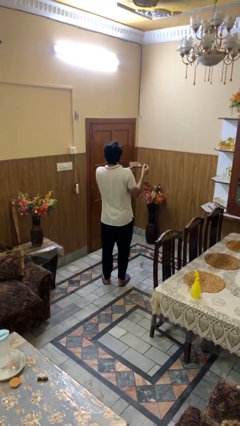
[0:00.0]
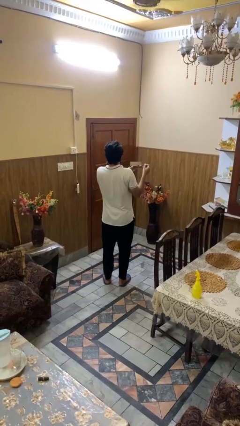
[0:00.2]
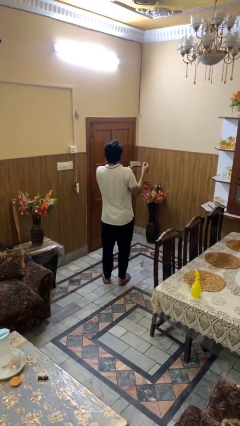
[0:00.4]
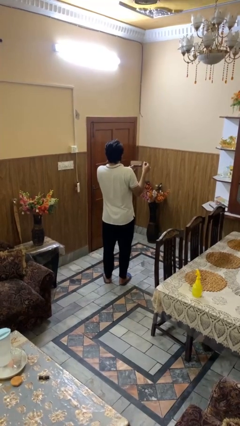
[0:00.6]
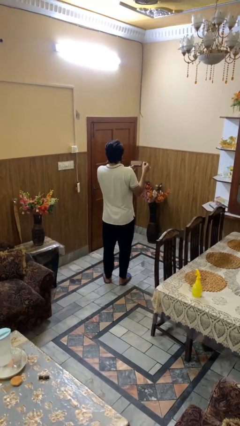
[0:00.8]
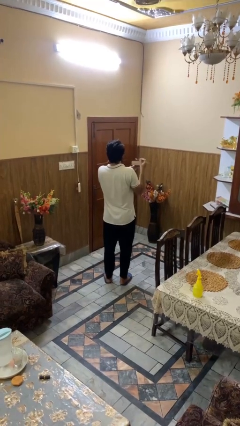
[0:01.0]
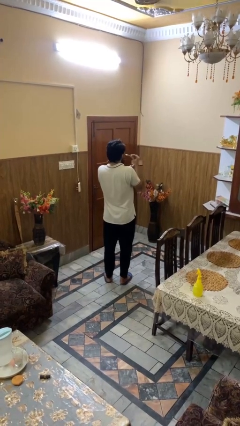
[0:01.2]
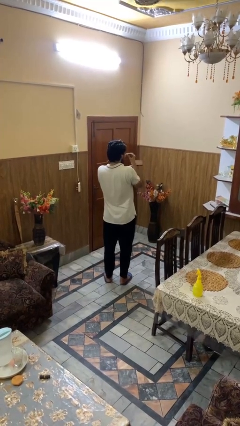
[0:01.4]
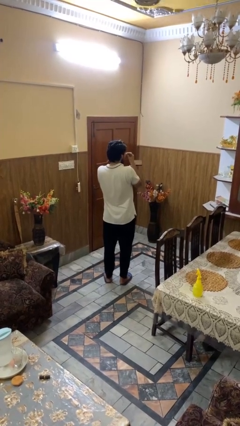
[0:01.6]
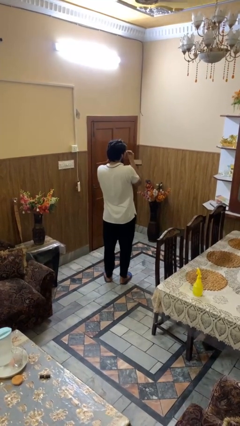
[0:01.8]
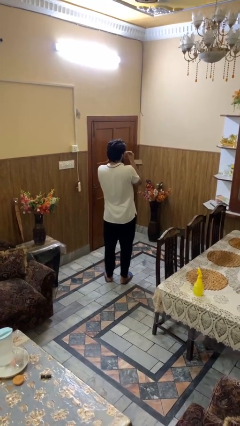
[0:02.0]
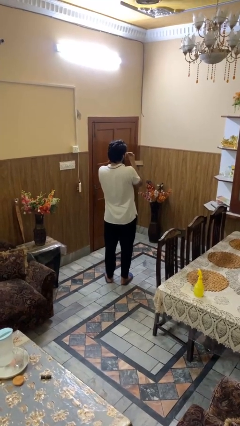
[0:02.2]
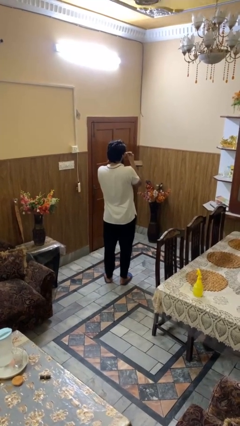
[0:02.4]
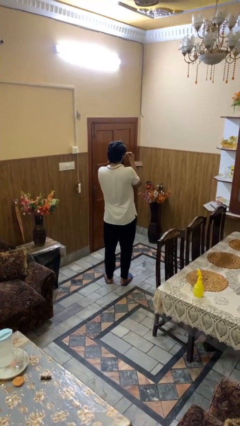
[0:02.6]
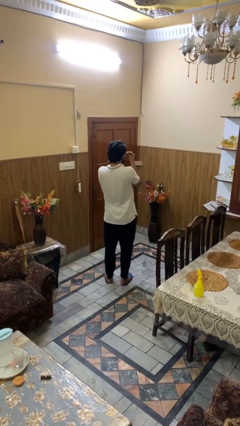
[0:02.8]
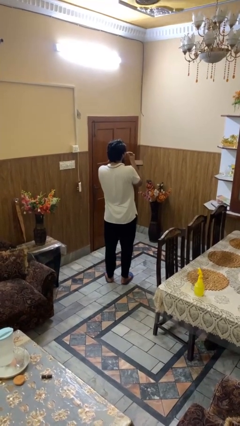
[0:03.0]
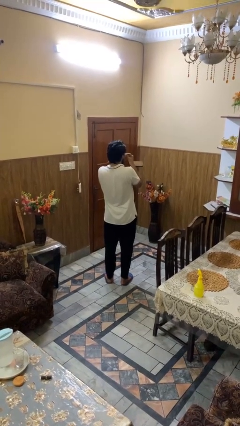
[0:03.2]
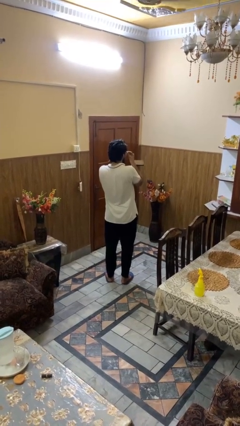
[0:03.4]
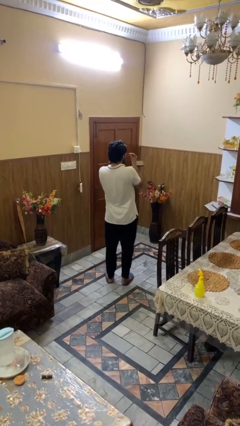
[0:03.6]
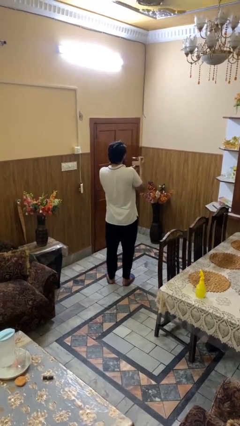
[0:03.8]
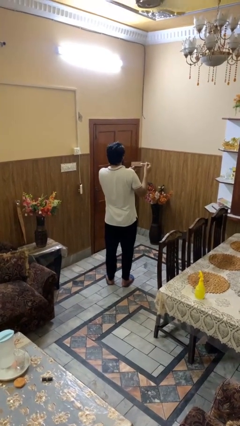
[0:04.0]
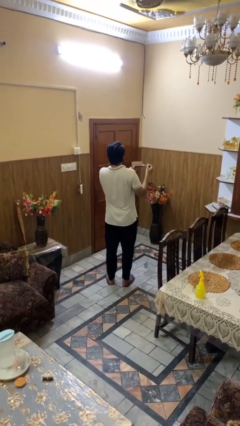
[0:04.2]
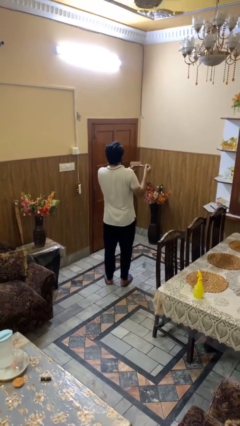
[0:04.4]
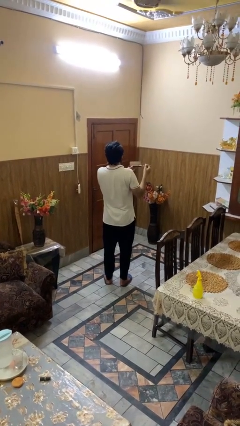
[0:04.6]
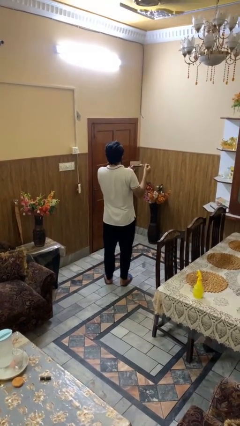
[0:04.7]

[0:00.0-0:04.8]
person applies eye makeup

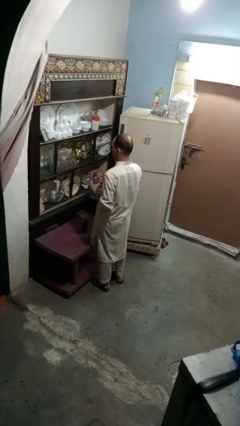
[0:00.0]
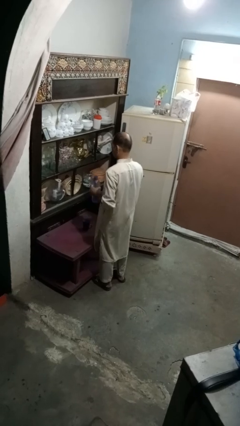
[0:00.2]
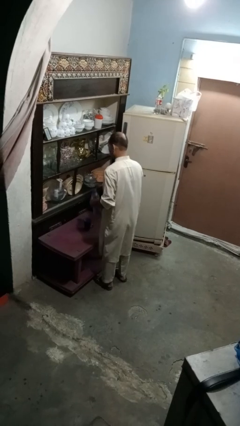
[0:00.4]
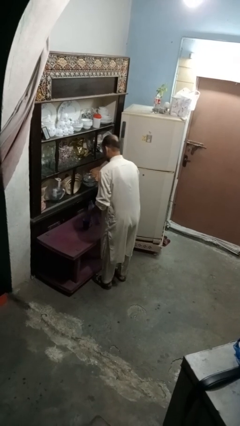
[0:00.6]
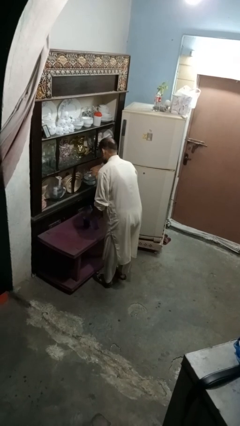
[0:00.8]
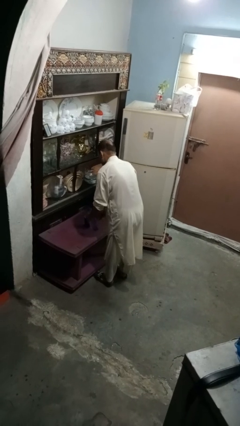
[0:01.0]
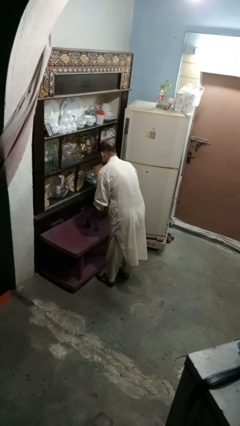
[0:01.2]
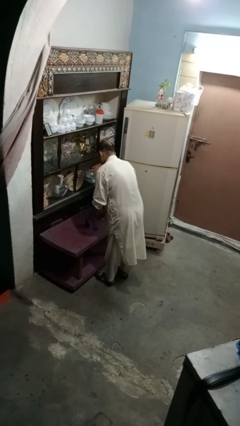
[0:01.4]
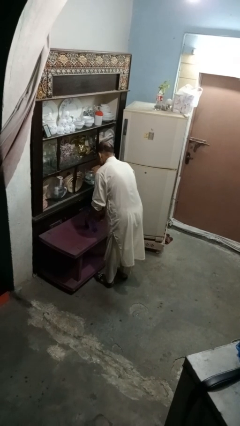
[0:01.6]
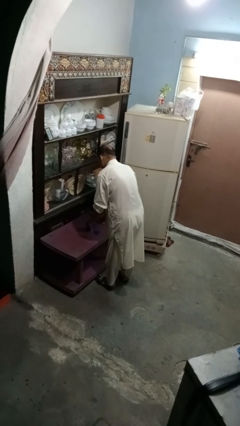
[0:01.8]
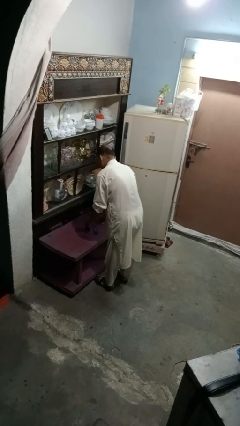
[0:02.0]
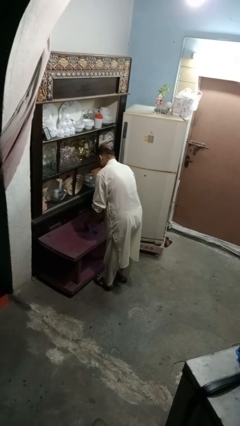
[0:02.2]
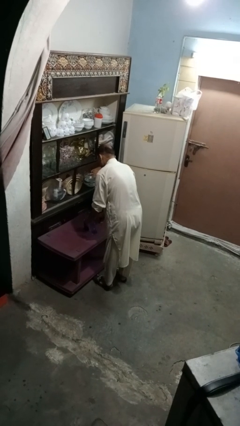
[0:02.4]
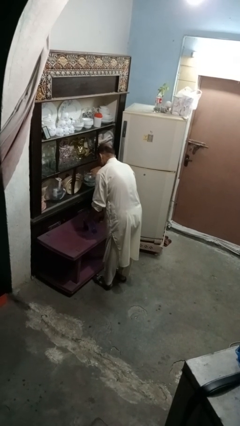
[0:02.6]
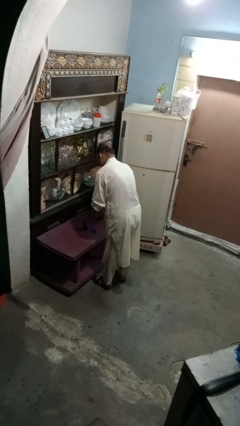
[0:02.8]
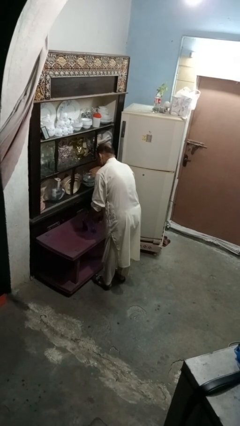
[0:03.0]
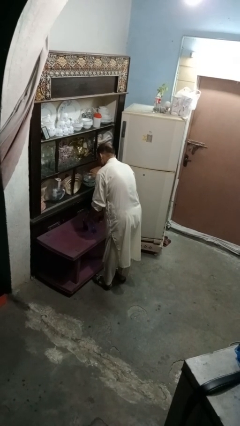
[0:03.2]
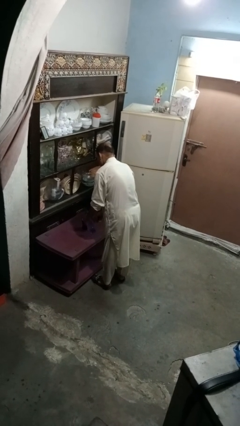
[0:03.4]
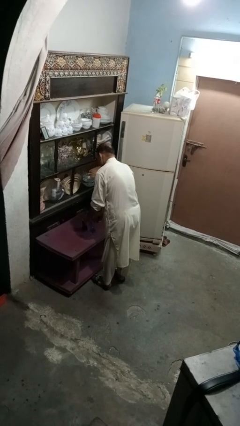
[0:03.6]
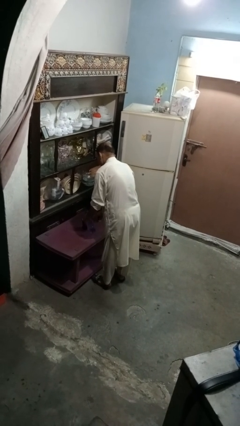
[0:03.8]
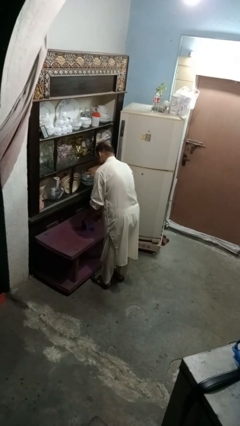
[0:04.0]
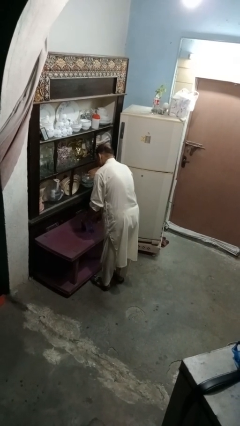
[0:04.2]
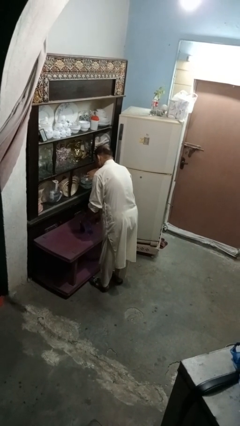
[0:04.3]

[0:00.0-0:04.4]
person pours liquid into cup

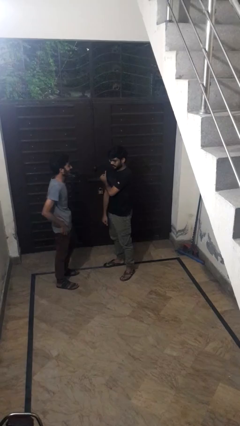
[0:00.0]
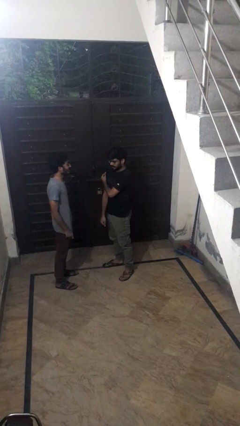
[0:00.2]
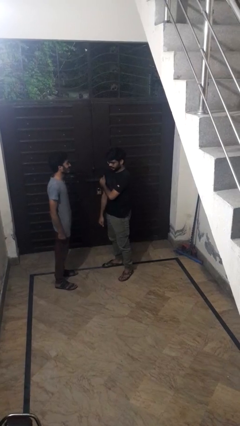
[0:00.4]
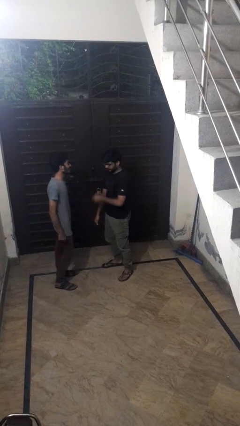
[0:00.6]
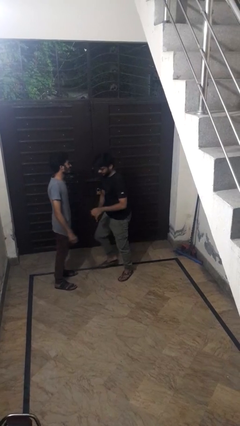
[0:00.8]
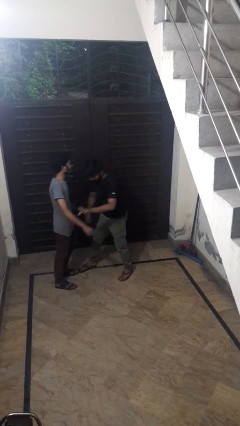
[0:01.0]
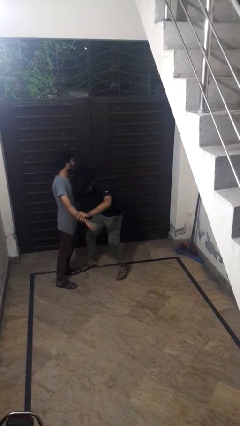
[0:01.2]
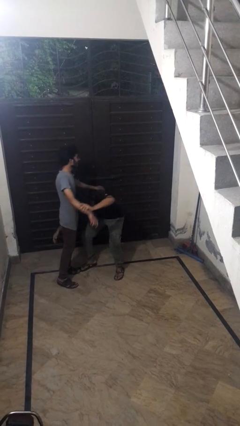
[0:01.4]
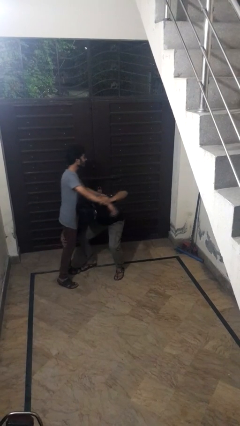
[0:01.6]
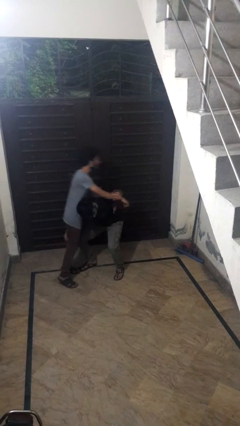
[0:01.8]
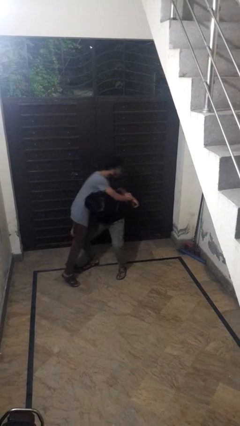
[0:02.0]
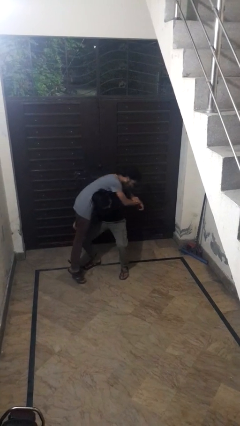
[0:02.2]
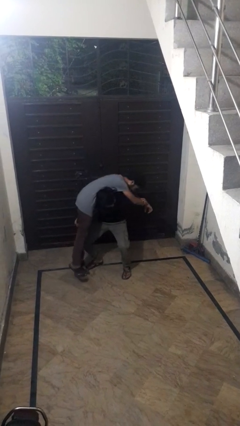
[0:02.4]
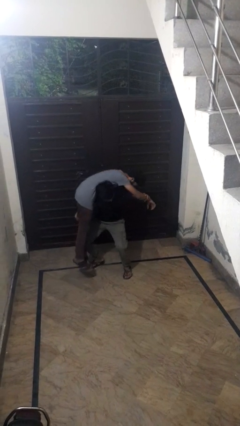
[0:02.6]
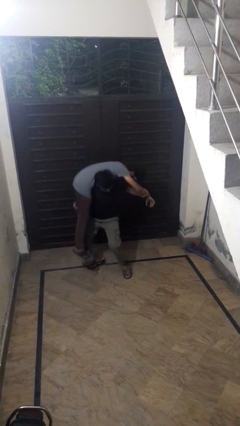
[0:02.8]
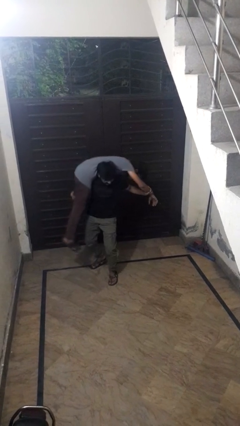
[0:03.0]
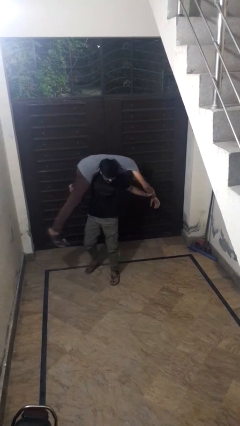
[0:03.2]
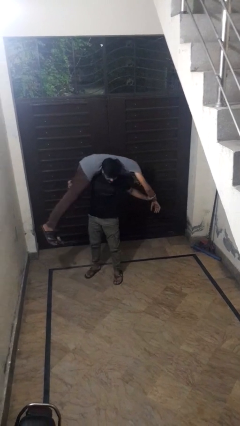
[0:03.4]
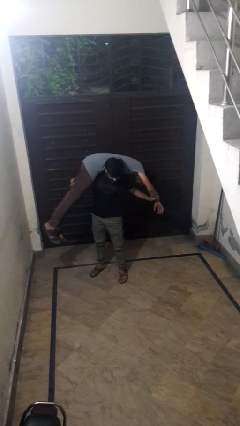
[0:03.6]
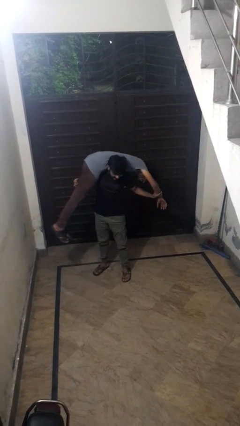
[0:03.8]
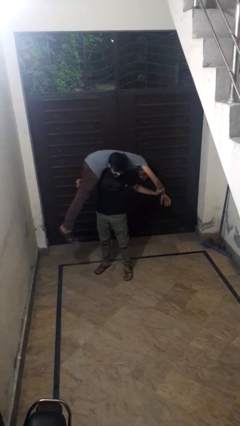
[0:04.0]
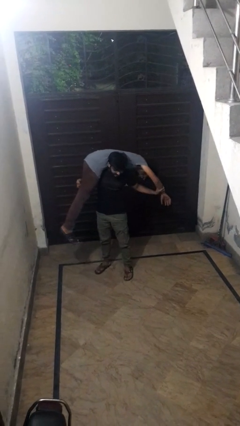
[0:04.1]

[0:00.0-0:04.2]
person carries person over shoulder

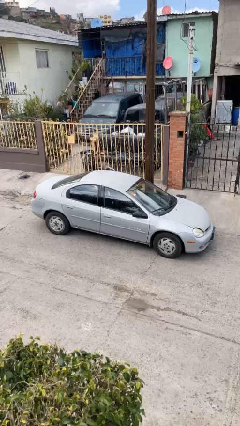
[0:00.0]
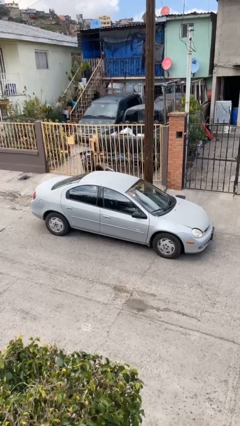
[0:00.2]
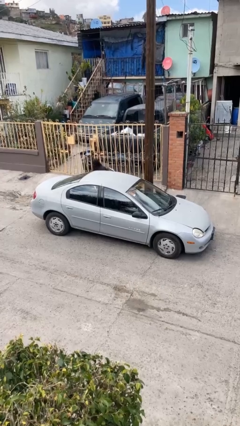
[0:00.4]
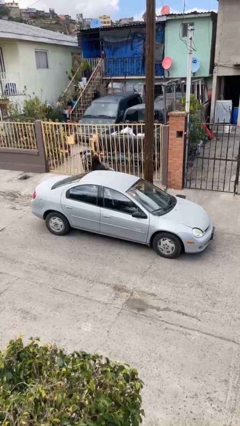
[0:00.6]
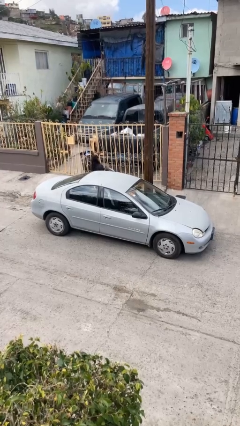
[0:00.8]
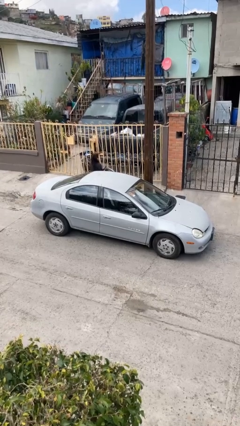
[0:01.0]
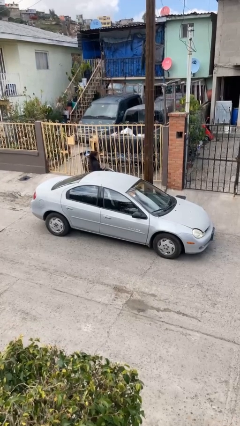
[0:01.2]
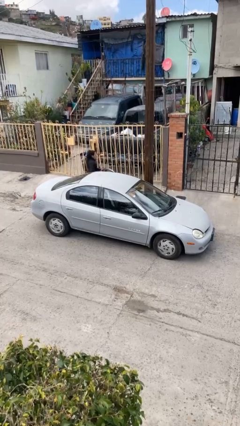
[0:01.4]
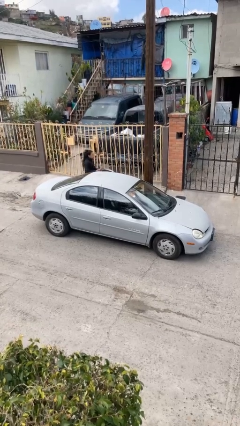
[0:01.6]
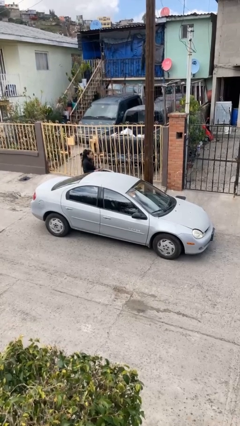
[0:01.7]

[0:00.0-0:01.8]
car drops off person

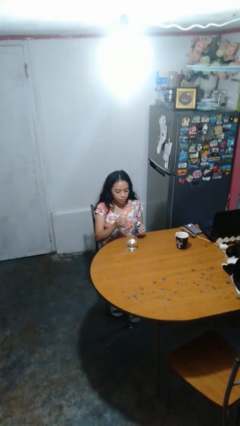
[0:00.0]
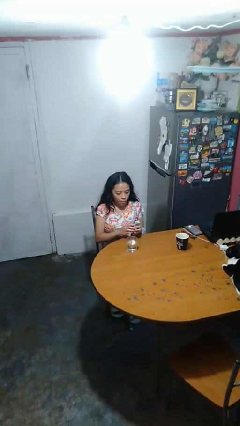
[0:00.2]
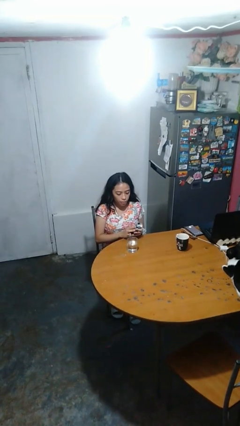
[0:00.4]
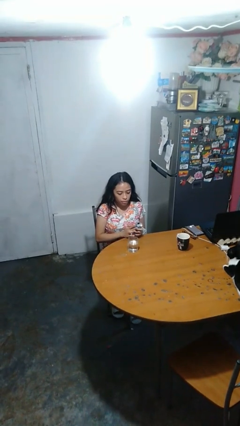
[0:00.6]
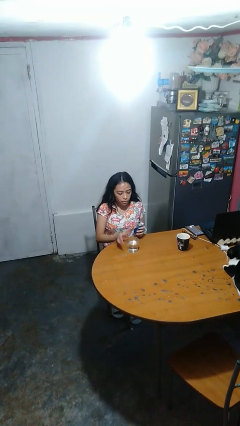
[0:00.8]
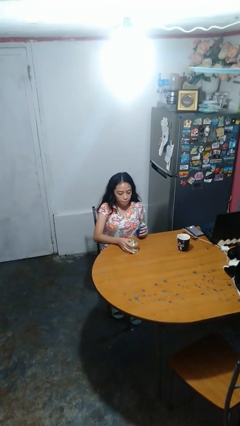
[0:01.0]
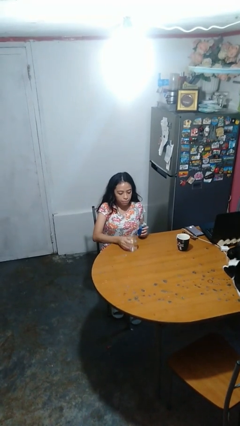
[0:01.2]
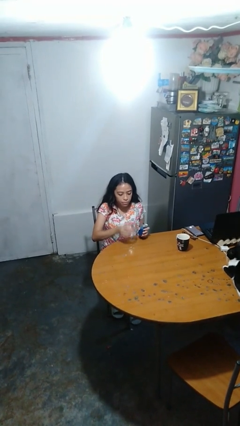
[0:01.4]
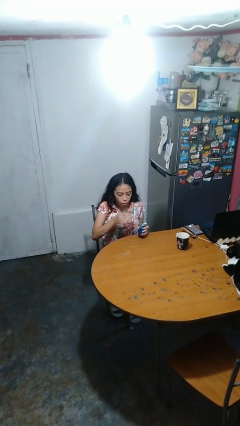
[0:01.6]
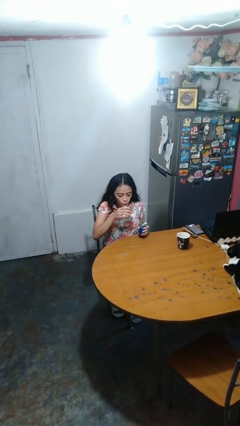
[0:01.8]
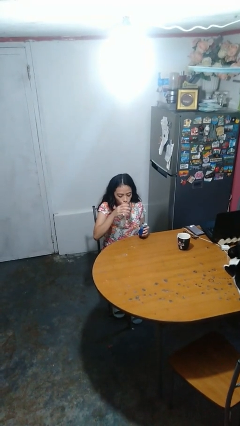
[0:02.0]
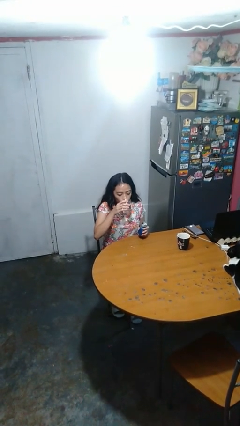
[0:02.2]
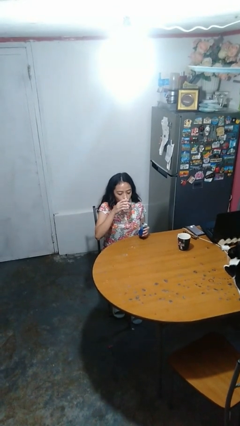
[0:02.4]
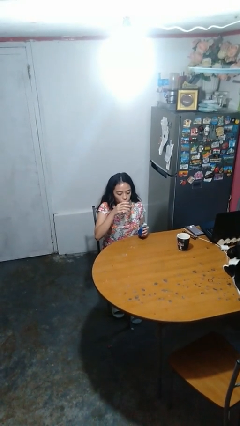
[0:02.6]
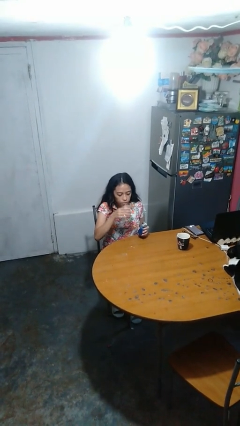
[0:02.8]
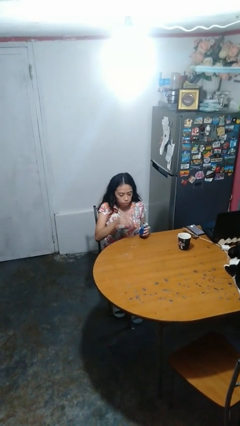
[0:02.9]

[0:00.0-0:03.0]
person drinks from cup
